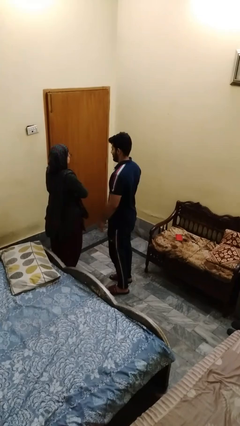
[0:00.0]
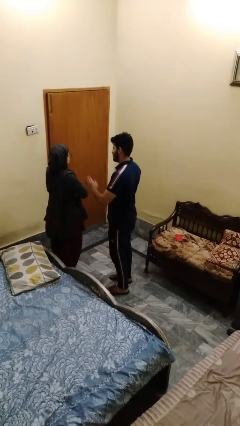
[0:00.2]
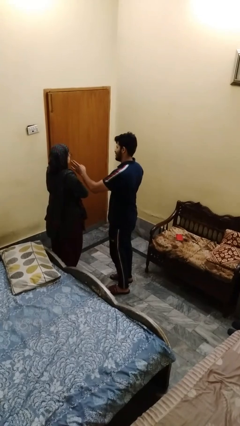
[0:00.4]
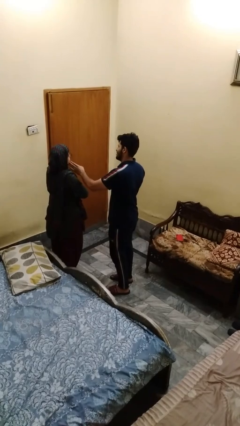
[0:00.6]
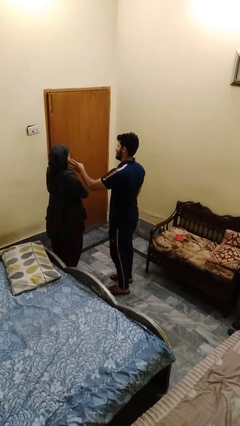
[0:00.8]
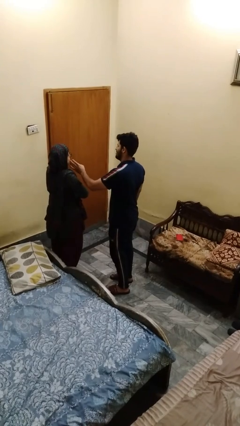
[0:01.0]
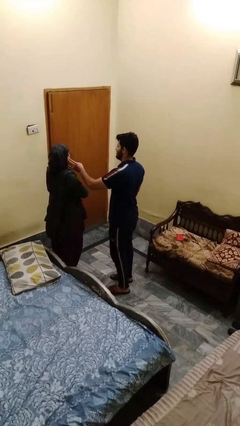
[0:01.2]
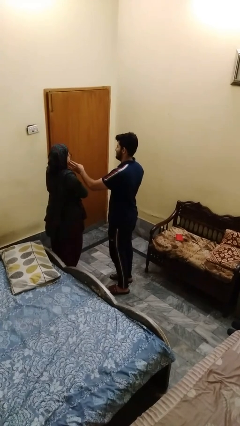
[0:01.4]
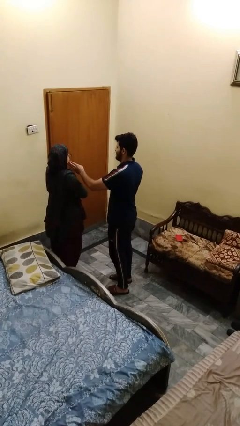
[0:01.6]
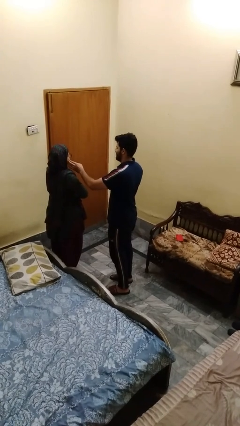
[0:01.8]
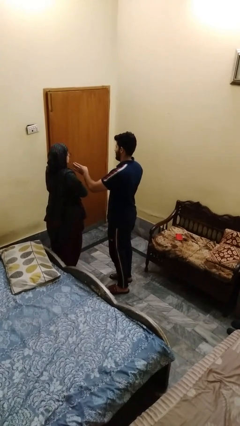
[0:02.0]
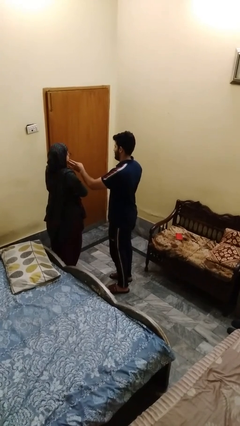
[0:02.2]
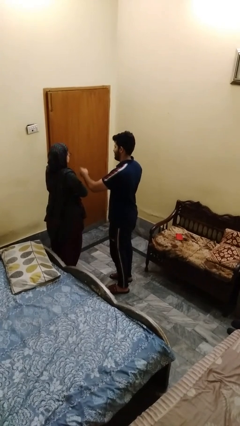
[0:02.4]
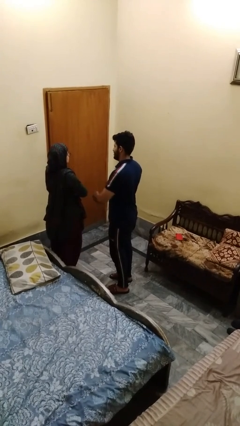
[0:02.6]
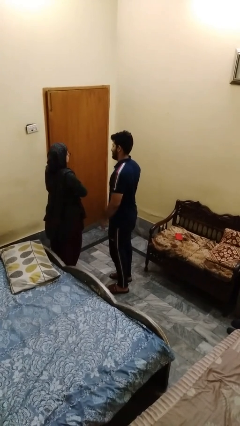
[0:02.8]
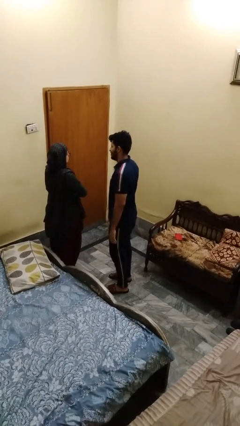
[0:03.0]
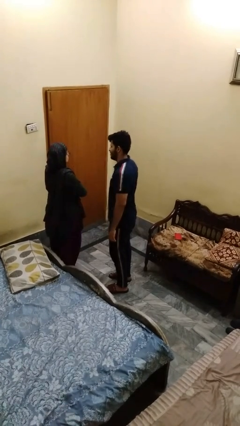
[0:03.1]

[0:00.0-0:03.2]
person touches face of person

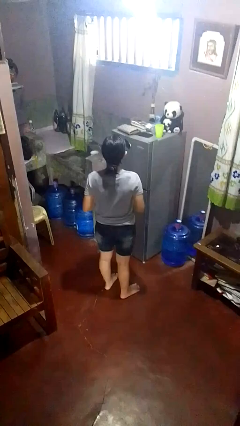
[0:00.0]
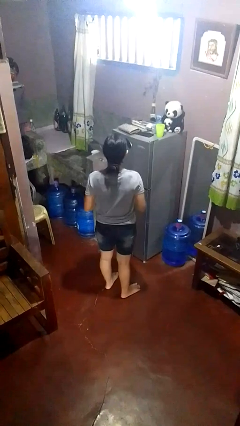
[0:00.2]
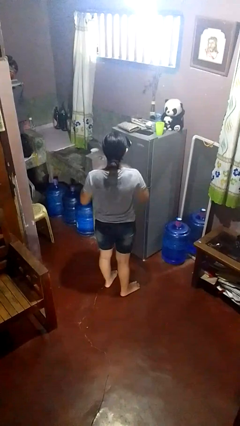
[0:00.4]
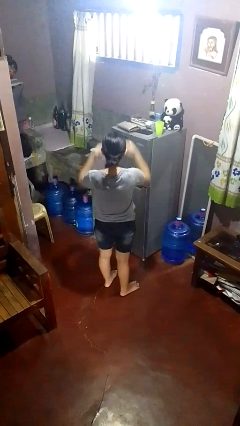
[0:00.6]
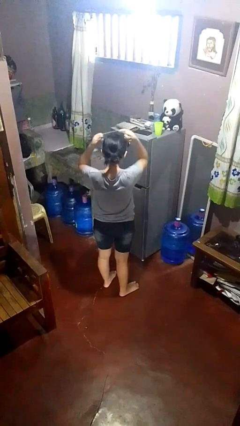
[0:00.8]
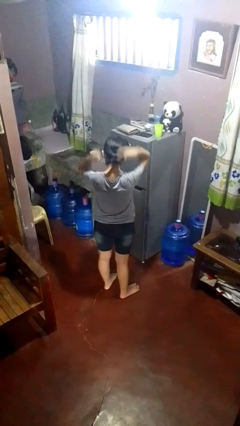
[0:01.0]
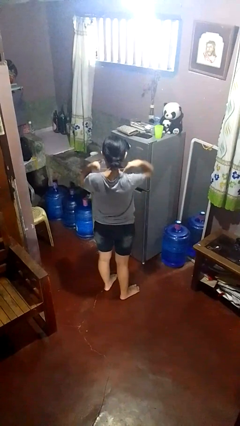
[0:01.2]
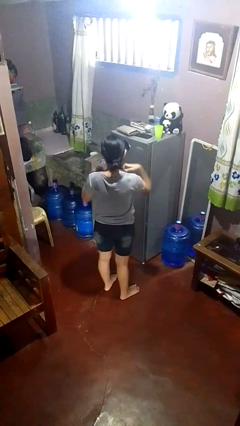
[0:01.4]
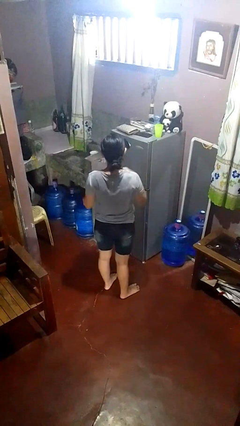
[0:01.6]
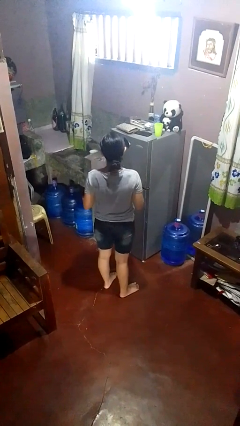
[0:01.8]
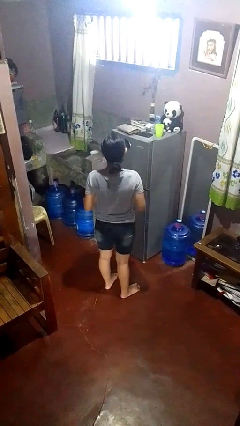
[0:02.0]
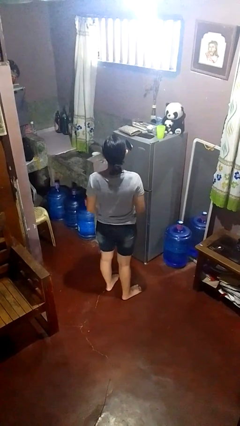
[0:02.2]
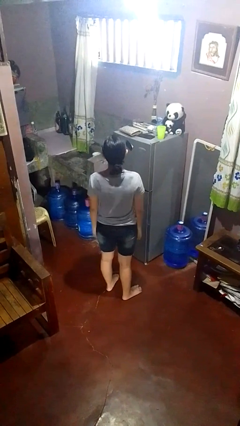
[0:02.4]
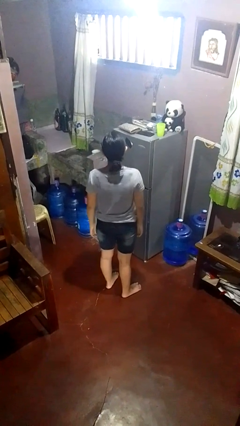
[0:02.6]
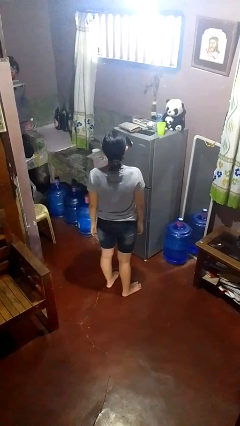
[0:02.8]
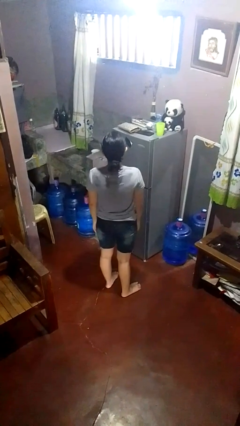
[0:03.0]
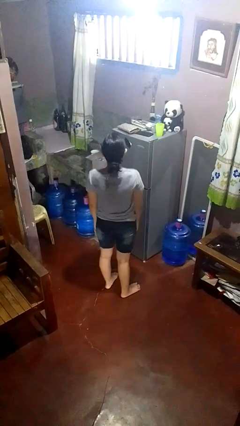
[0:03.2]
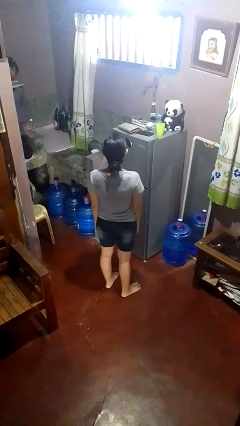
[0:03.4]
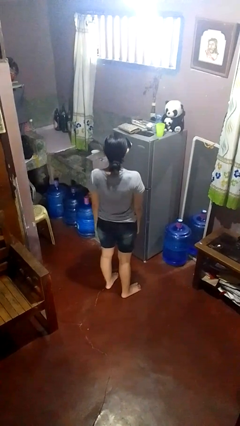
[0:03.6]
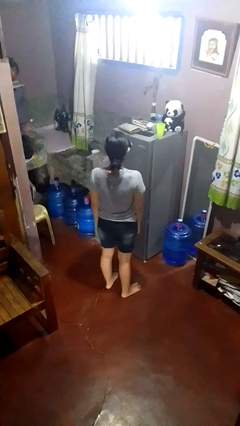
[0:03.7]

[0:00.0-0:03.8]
person puts on necklace

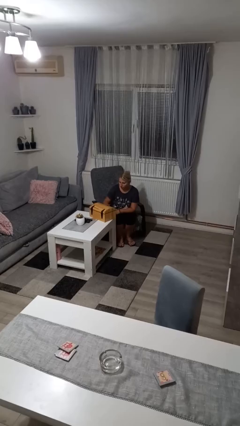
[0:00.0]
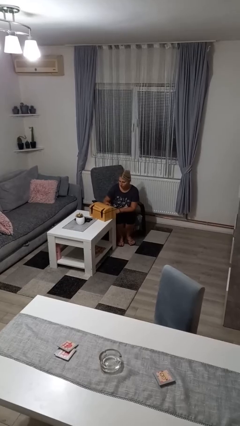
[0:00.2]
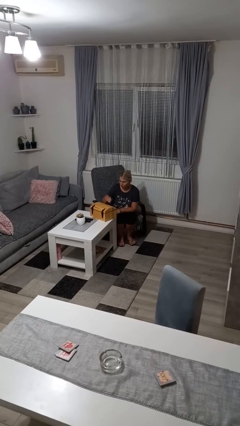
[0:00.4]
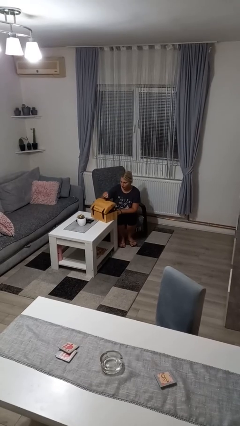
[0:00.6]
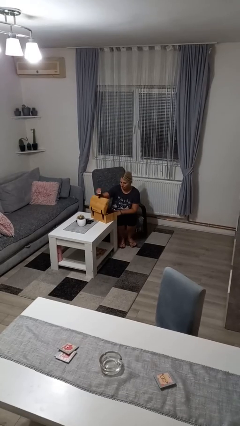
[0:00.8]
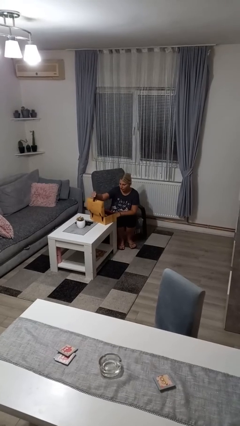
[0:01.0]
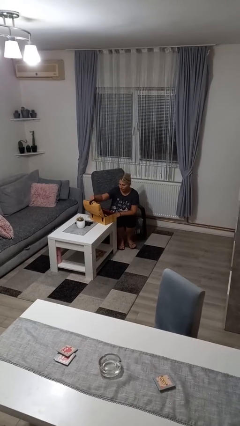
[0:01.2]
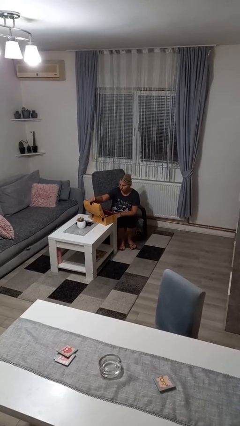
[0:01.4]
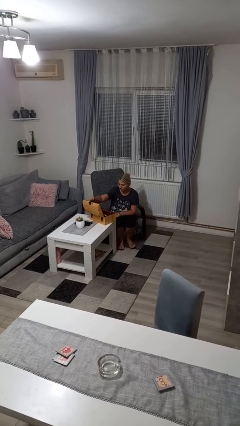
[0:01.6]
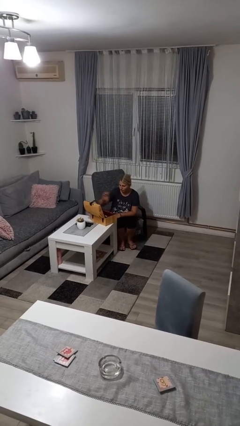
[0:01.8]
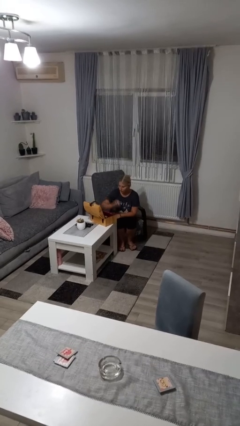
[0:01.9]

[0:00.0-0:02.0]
person opens jewelry box

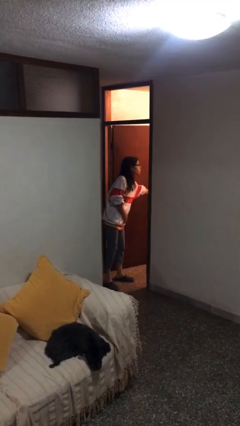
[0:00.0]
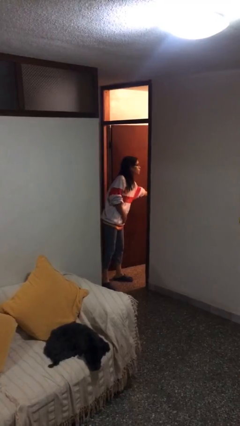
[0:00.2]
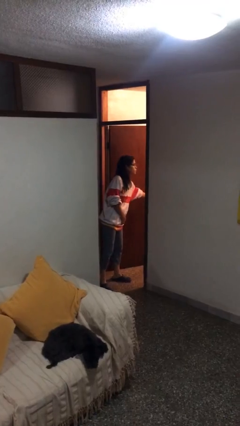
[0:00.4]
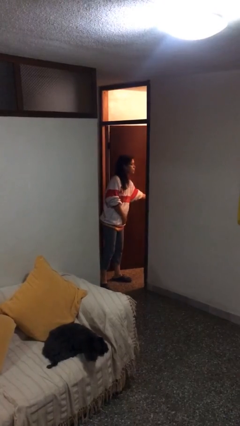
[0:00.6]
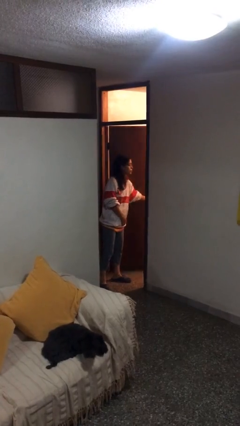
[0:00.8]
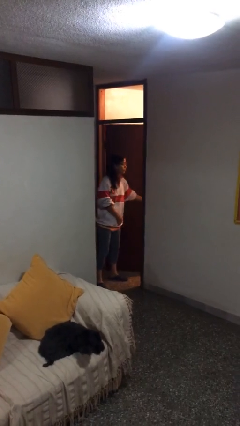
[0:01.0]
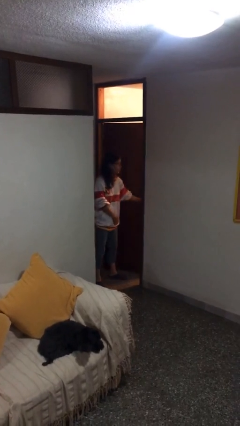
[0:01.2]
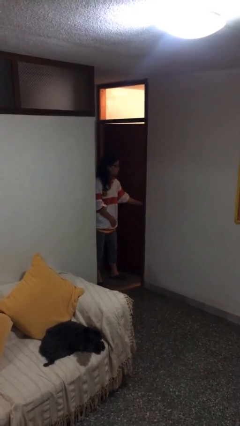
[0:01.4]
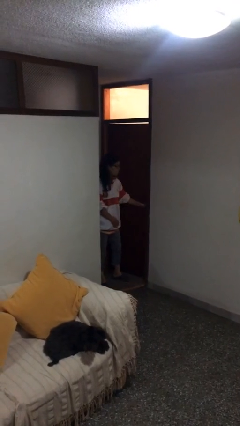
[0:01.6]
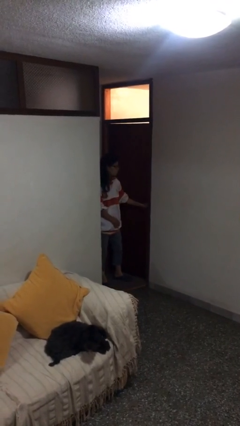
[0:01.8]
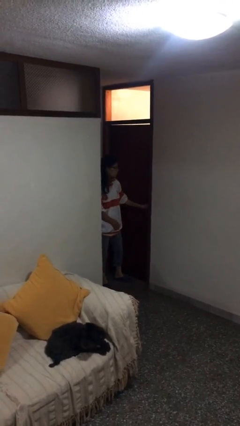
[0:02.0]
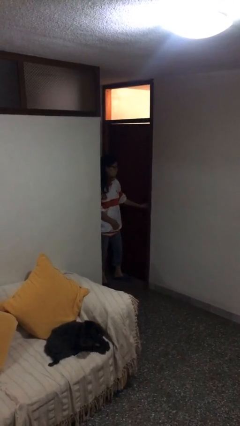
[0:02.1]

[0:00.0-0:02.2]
person closes facility door

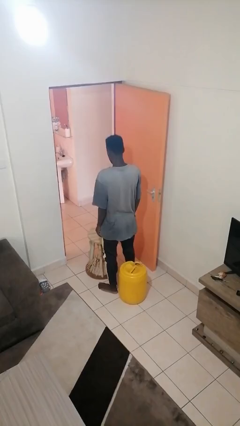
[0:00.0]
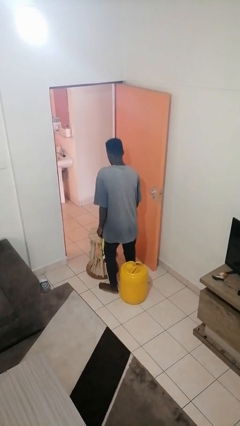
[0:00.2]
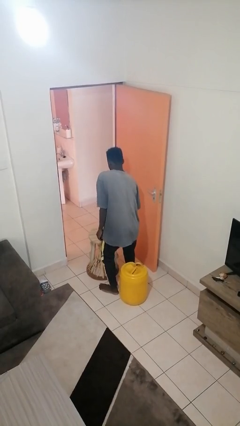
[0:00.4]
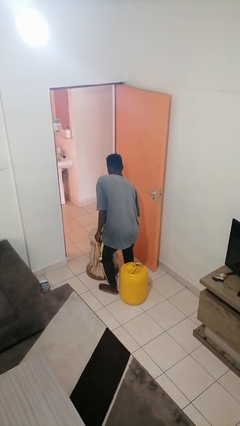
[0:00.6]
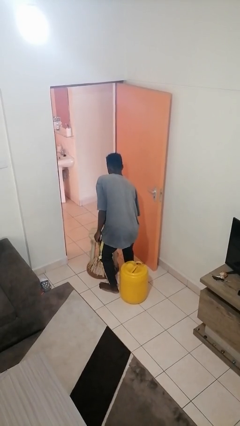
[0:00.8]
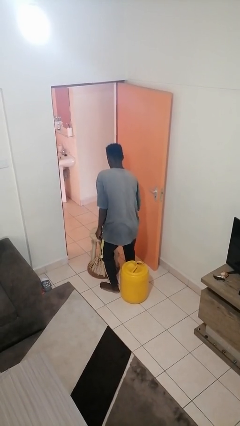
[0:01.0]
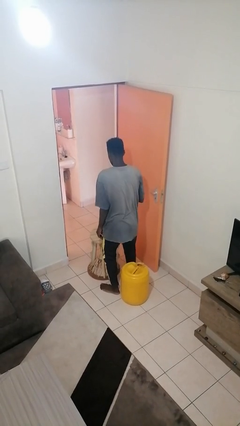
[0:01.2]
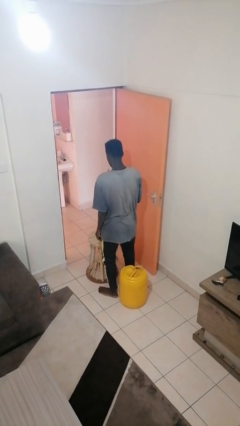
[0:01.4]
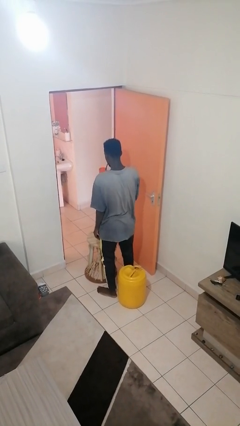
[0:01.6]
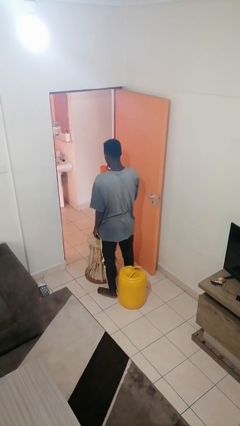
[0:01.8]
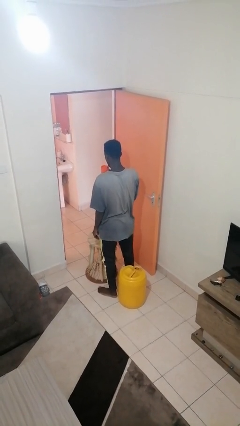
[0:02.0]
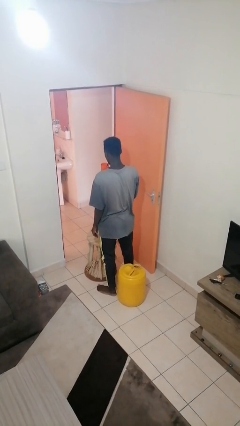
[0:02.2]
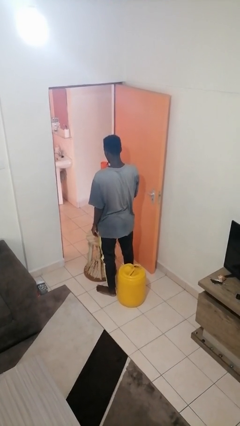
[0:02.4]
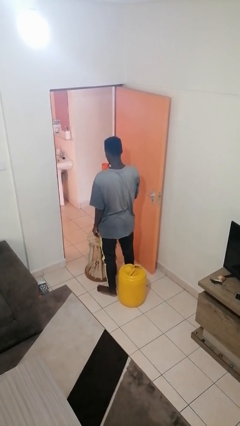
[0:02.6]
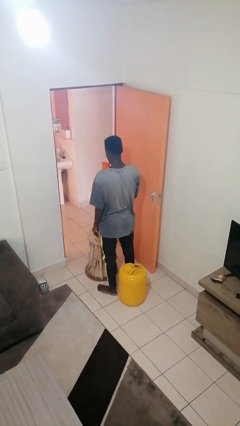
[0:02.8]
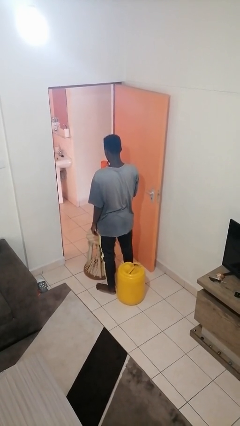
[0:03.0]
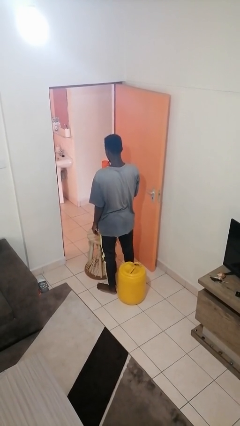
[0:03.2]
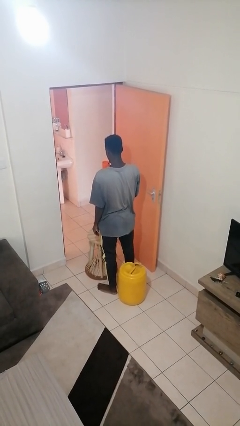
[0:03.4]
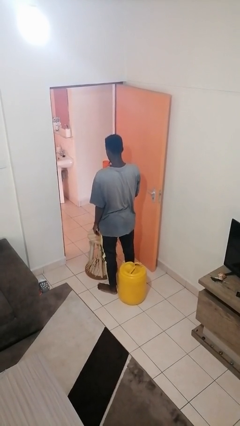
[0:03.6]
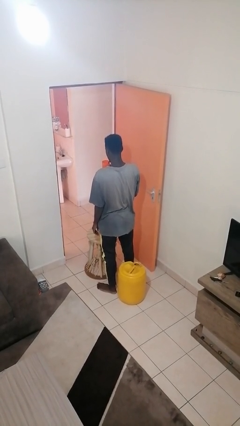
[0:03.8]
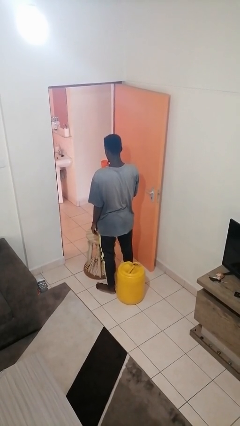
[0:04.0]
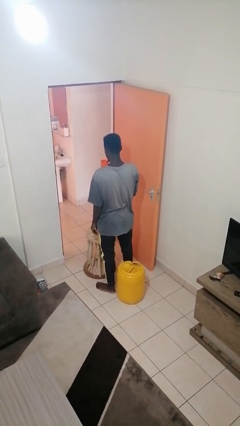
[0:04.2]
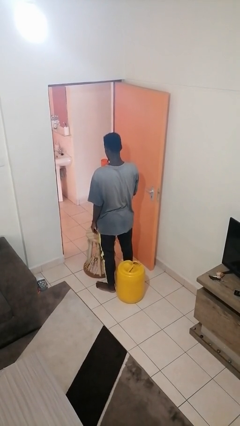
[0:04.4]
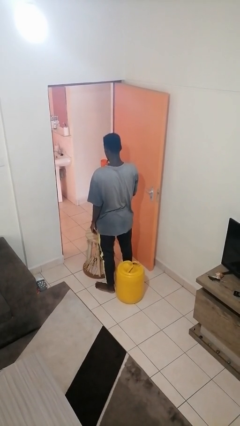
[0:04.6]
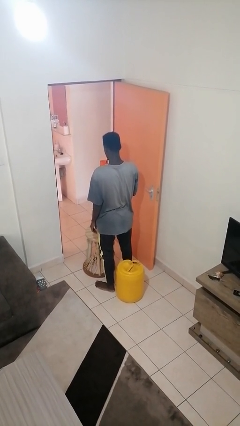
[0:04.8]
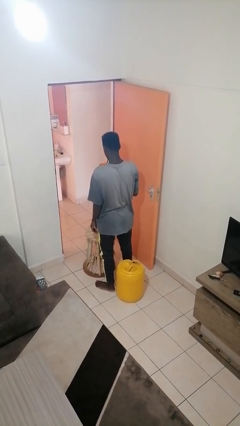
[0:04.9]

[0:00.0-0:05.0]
person drinks from straw

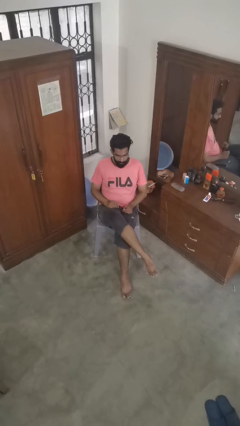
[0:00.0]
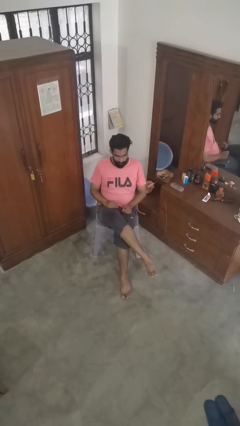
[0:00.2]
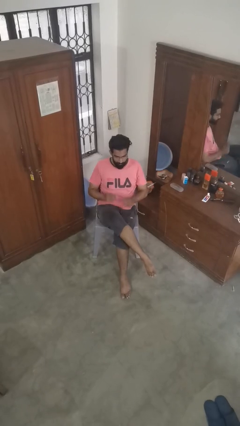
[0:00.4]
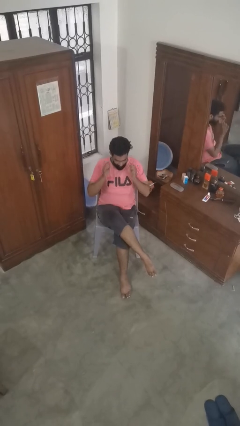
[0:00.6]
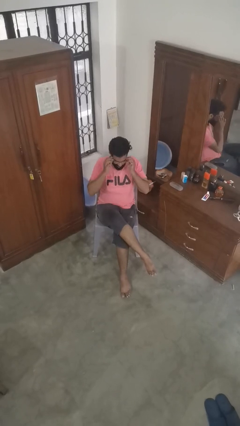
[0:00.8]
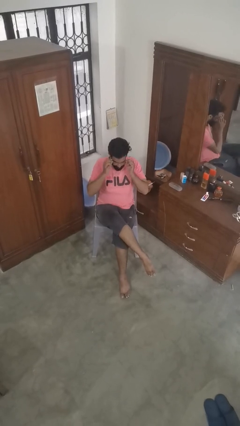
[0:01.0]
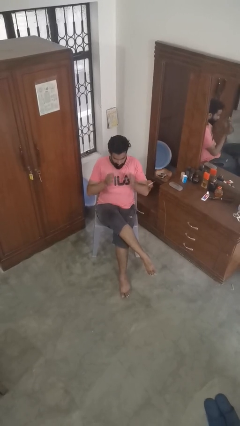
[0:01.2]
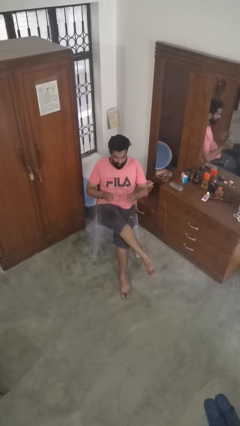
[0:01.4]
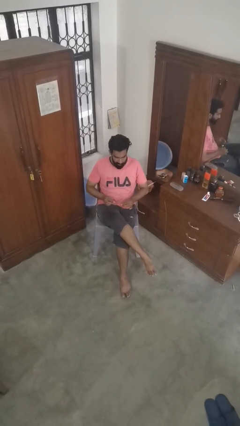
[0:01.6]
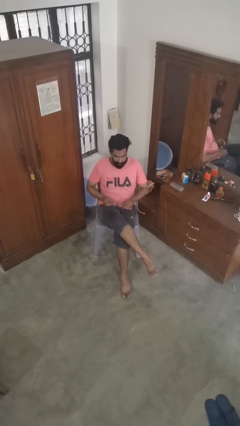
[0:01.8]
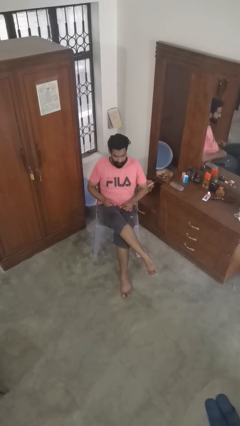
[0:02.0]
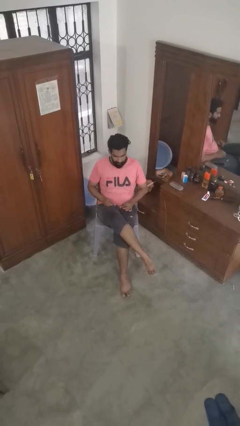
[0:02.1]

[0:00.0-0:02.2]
person takes off glasses
